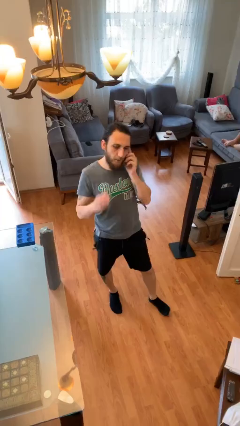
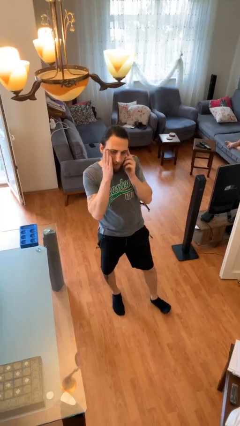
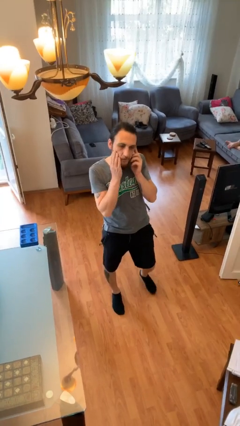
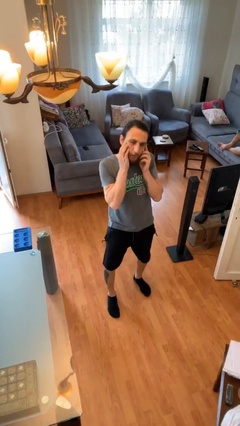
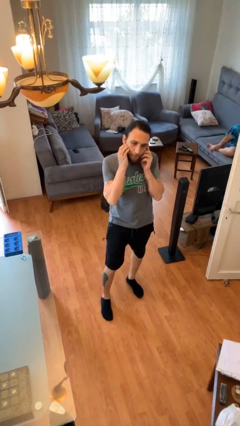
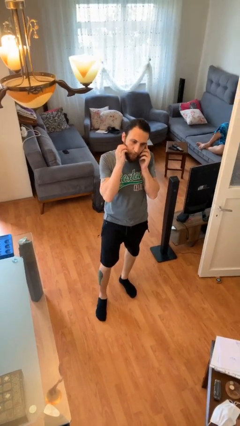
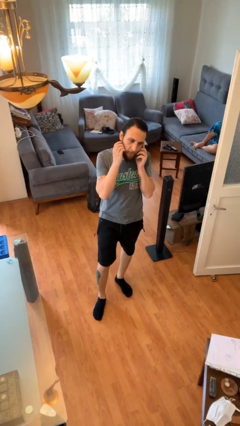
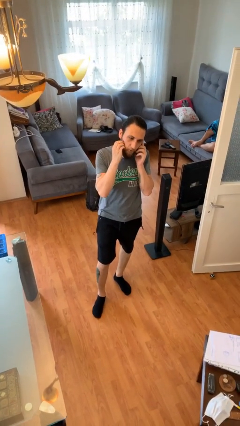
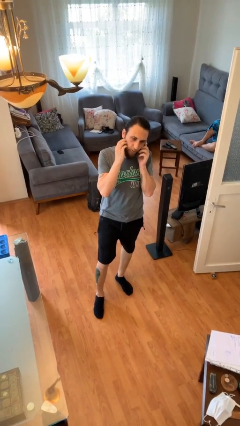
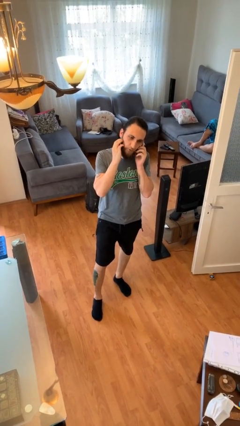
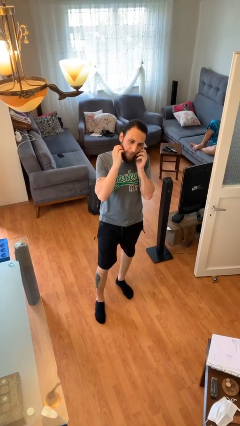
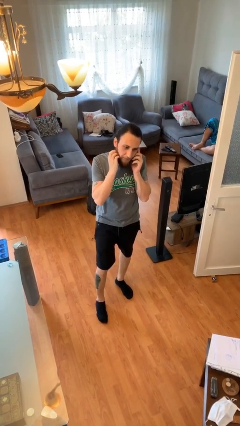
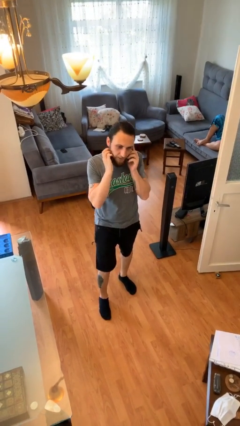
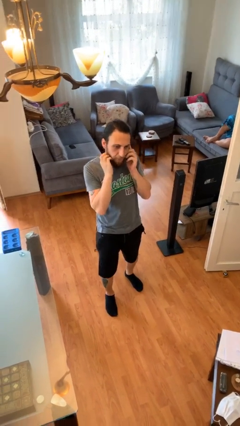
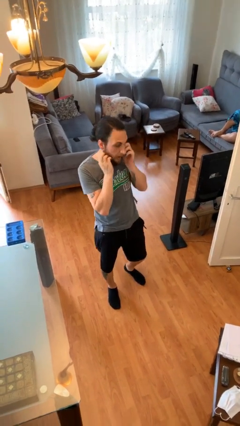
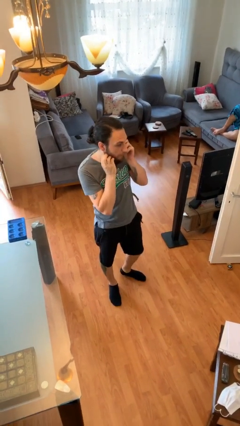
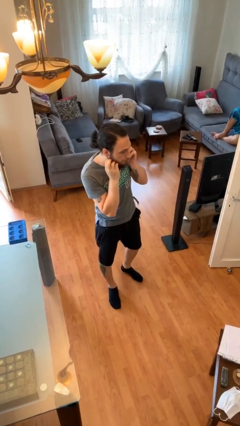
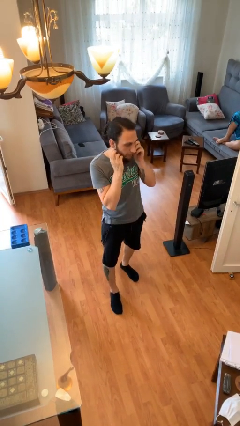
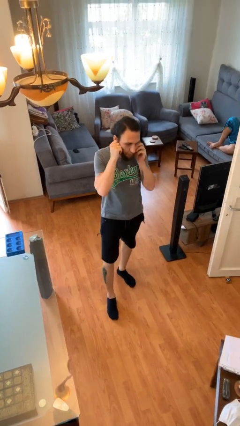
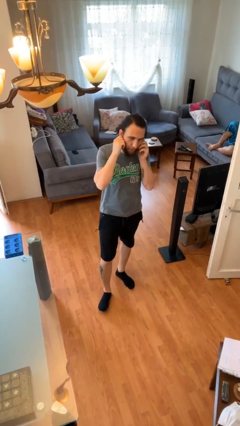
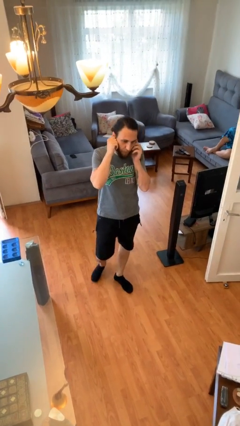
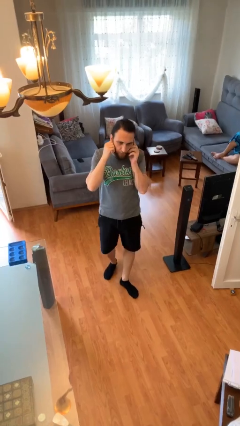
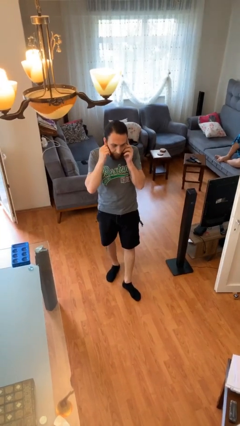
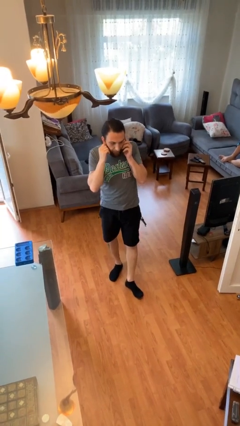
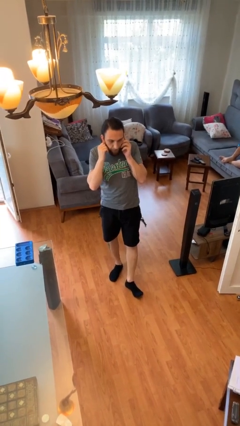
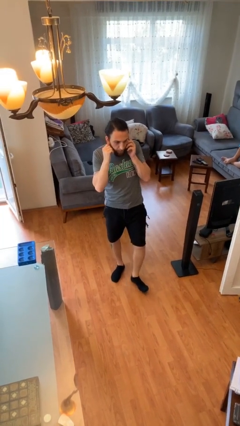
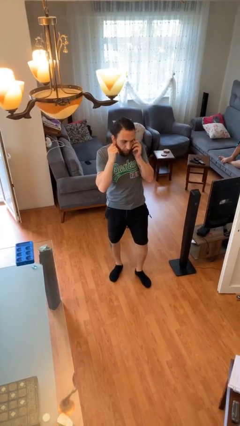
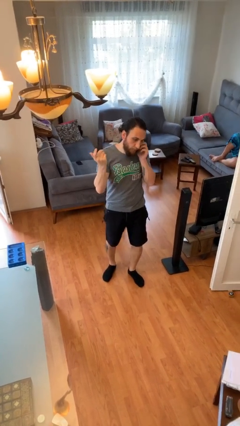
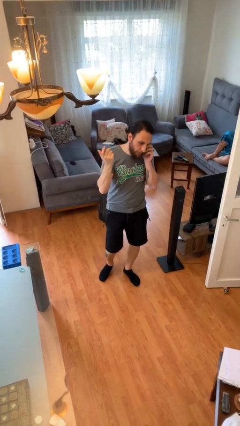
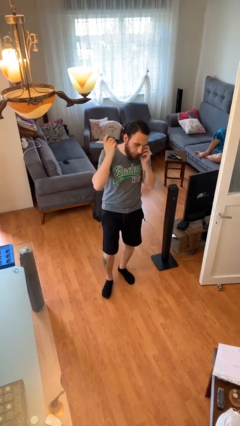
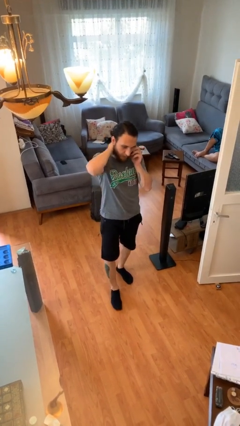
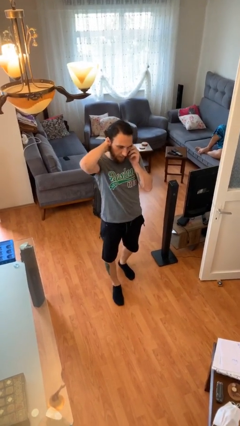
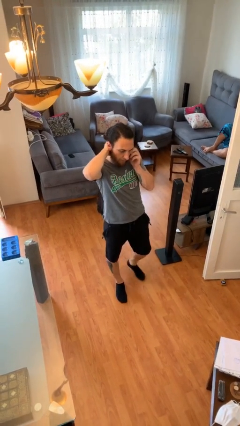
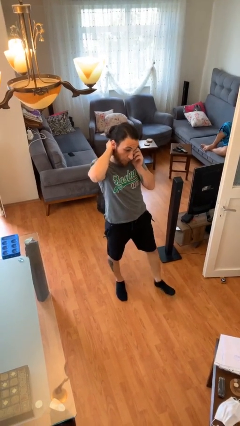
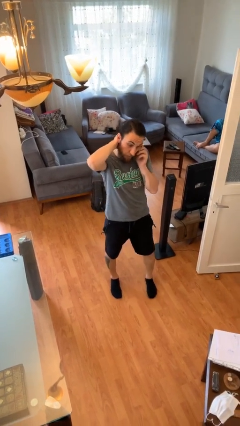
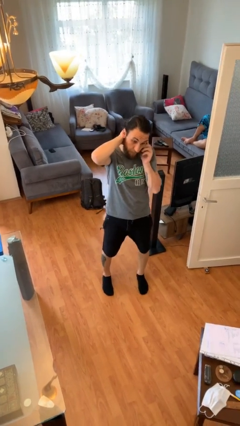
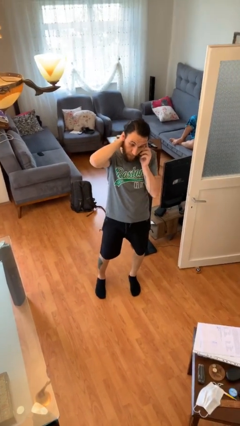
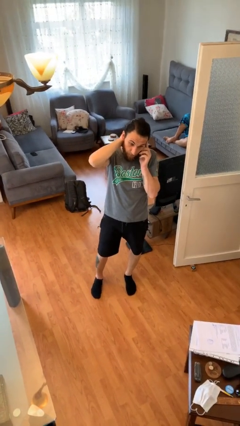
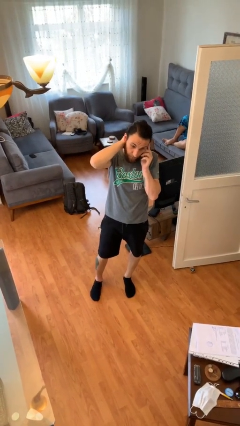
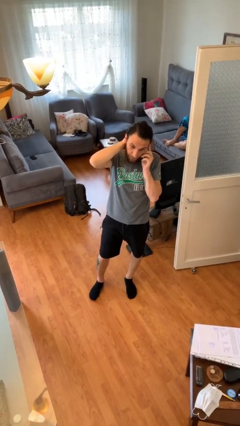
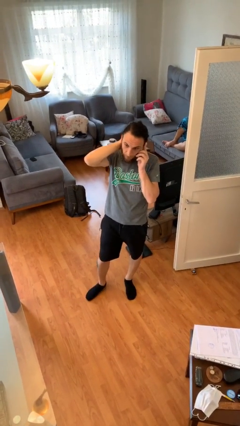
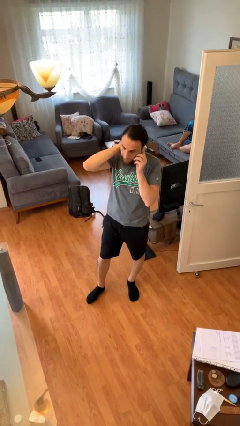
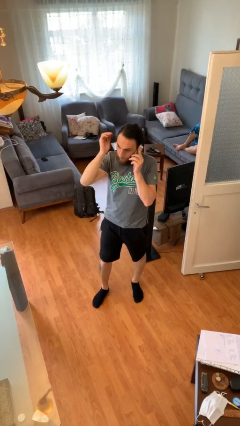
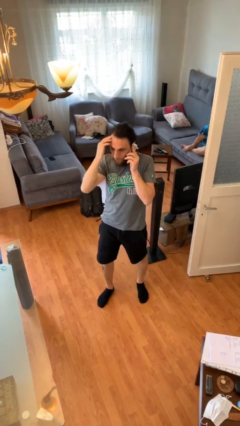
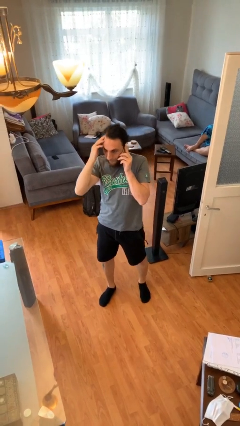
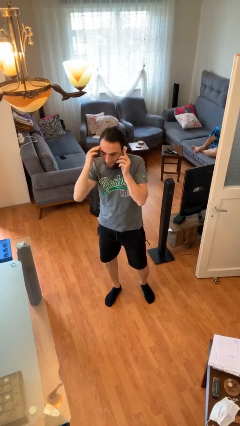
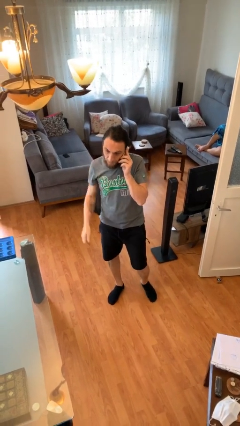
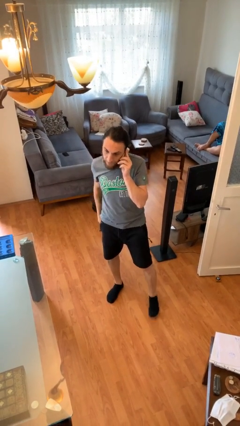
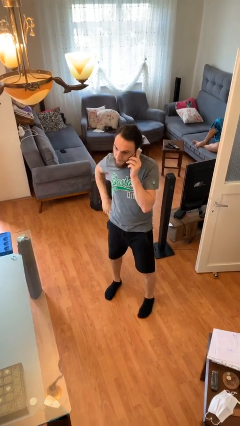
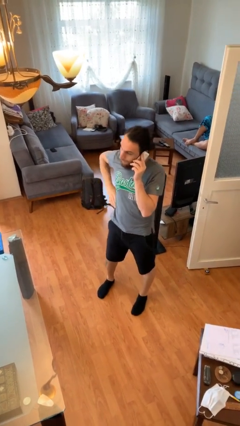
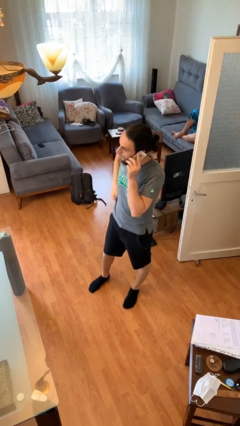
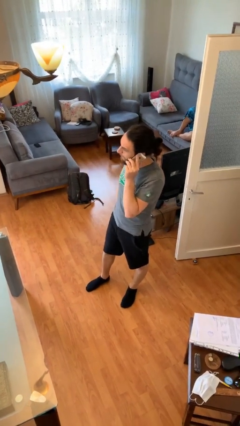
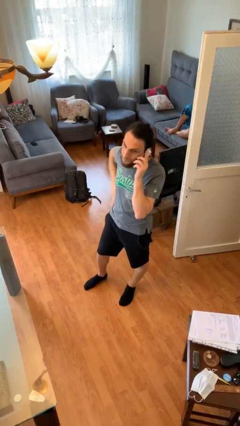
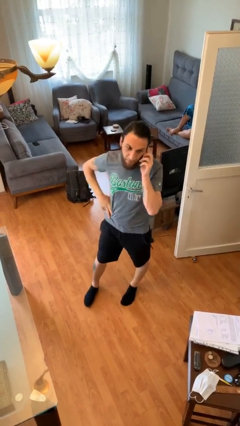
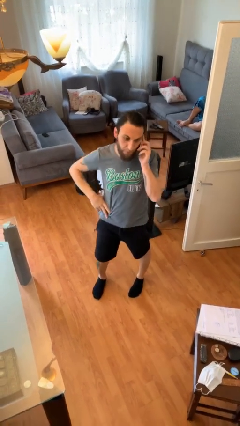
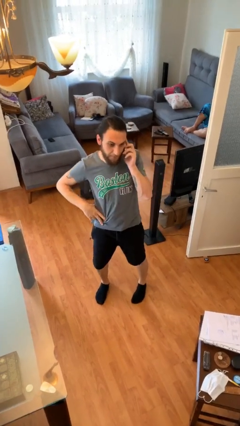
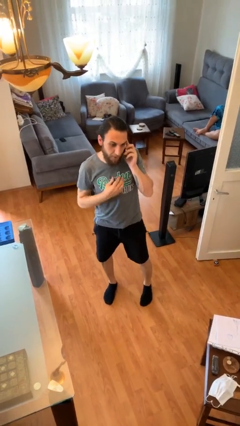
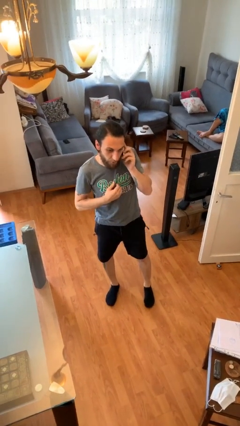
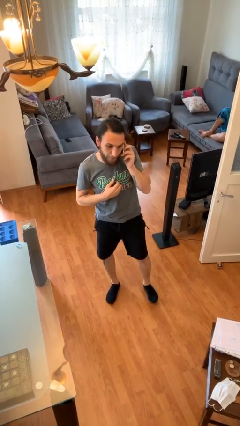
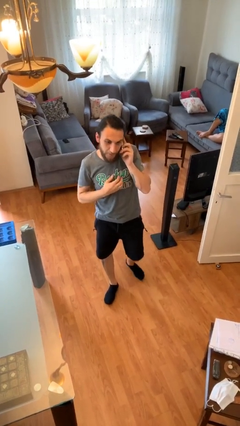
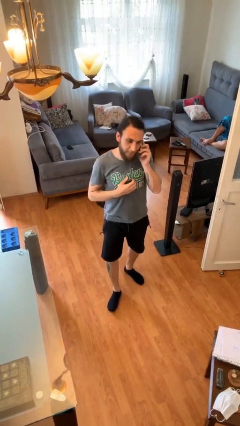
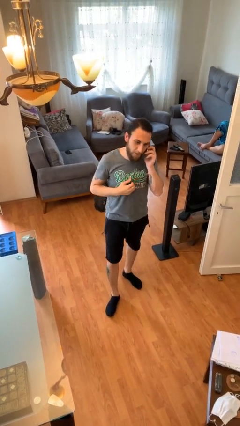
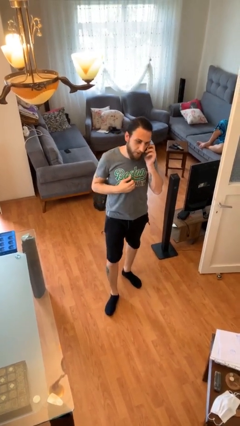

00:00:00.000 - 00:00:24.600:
person talks on phone

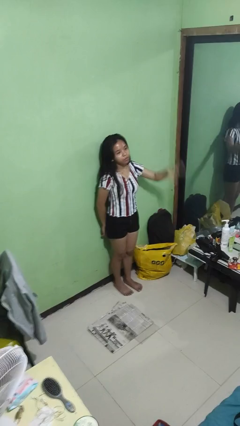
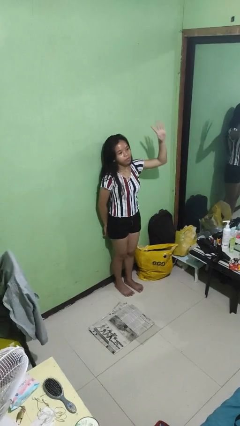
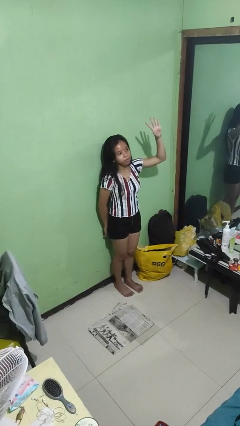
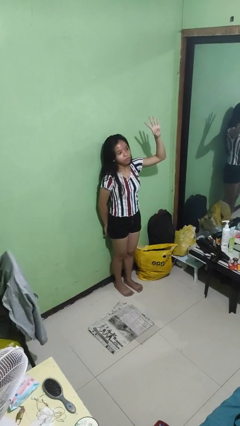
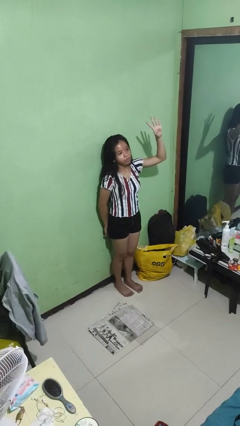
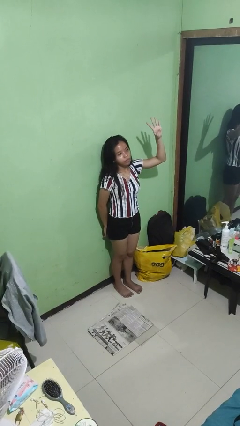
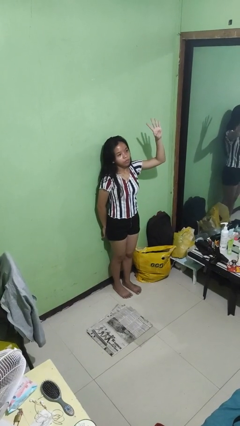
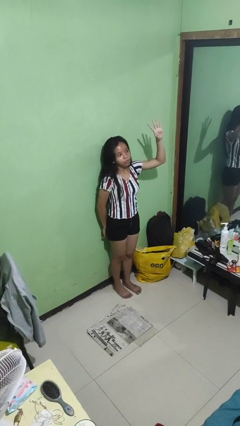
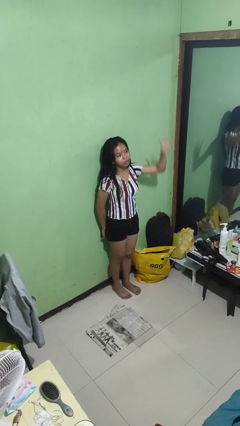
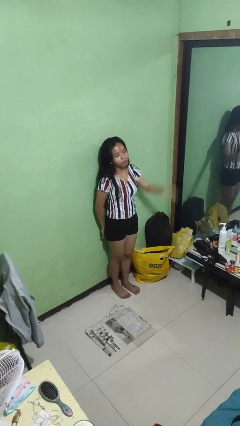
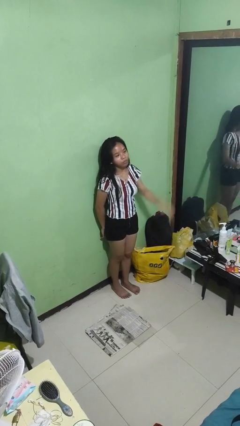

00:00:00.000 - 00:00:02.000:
person gestures number four

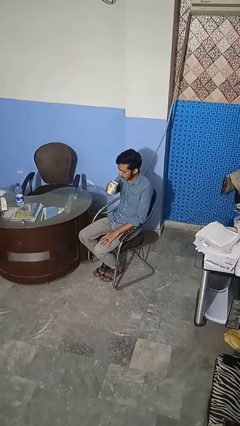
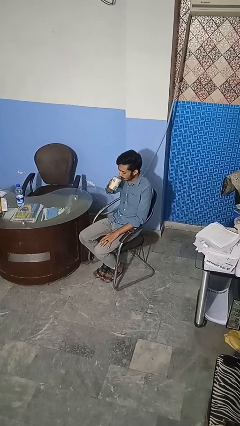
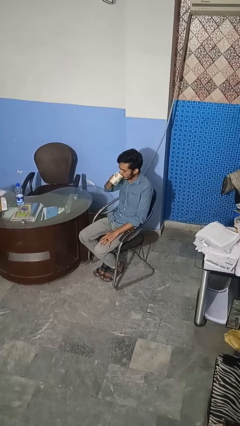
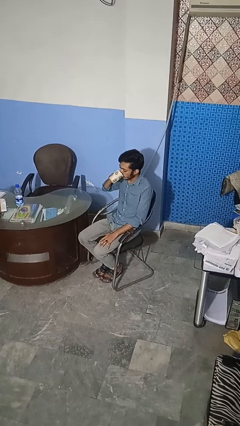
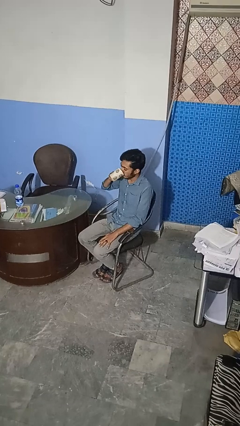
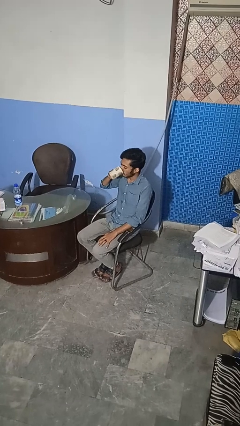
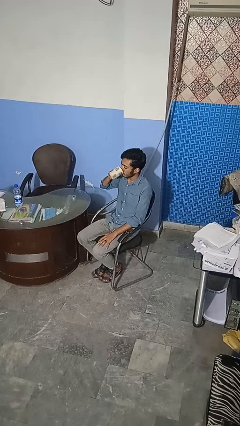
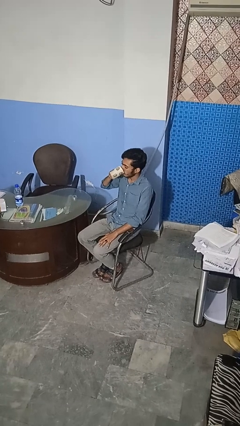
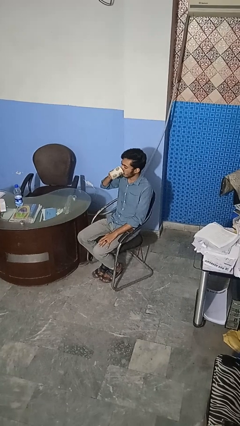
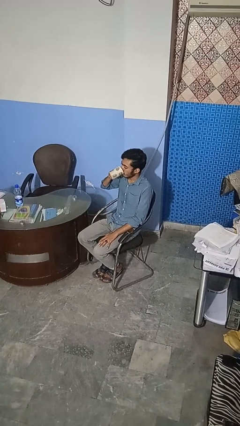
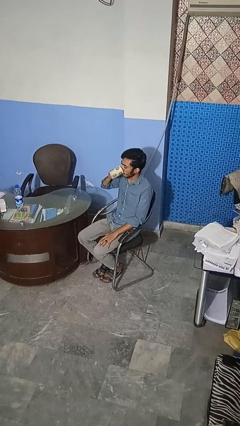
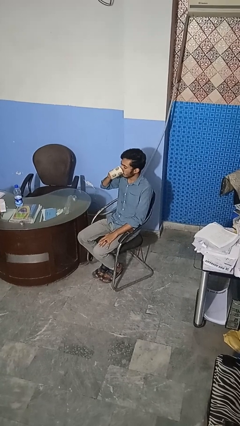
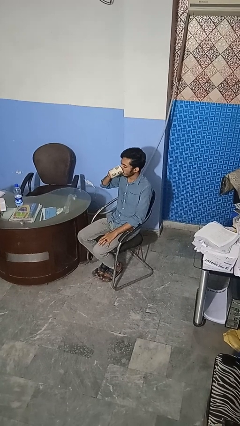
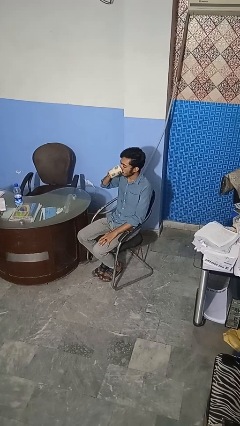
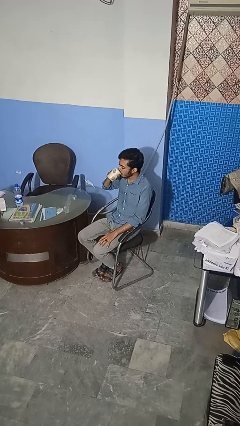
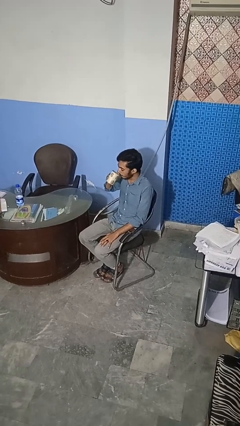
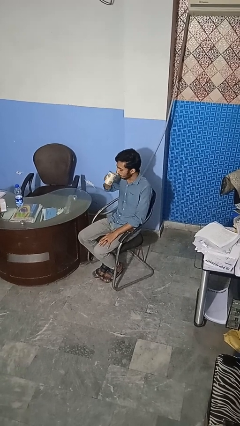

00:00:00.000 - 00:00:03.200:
person drinks from mug

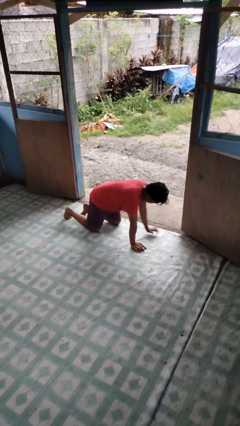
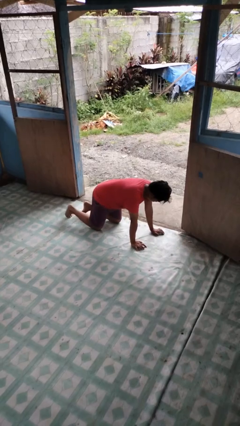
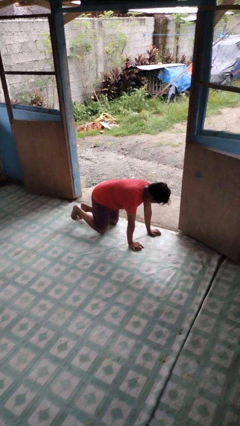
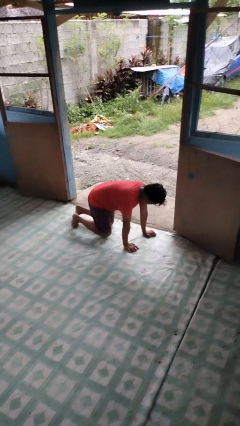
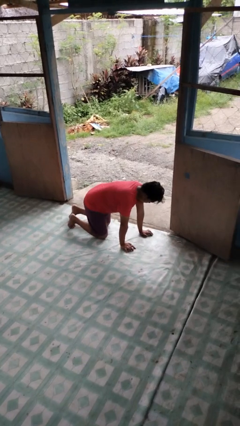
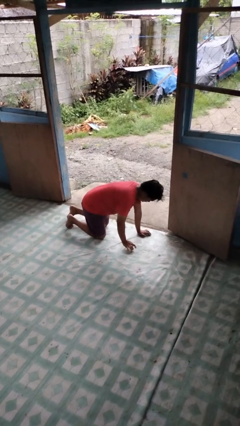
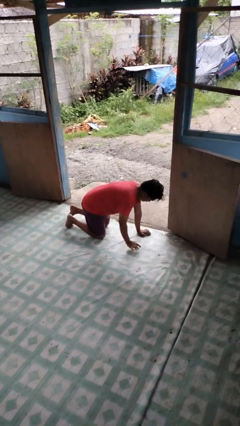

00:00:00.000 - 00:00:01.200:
person crawls
